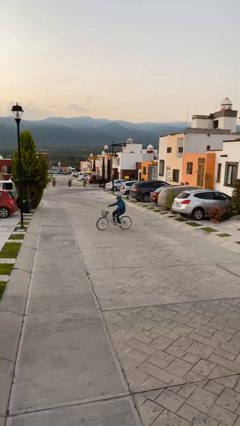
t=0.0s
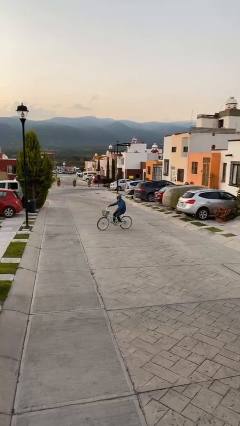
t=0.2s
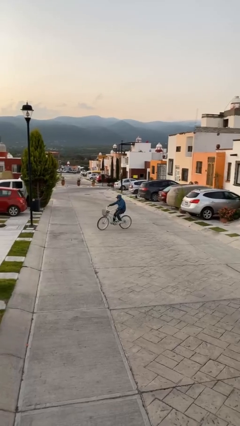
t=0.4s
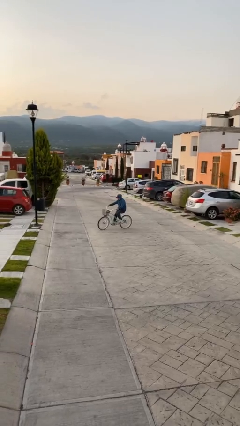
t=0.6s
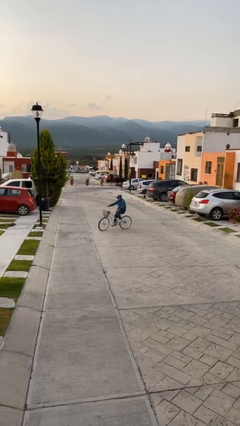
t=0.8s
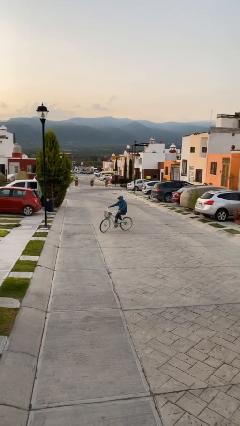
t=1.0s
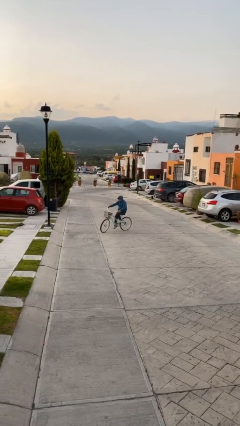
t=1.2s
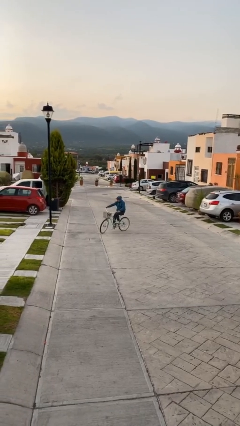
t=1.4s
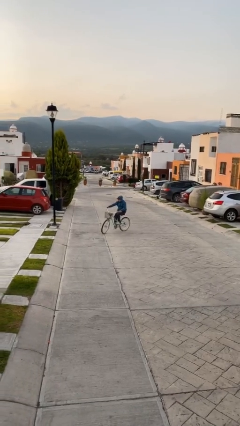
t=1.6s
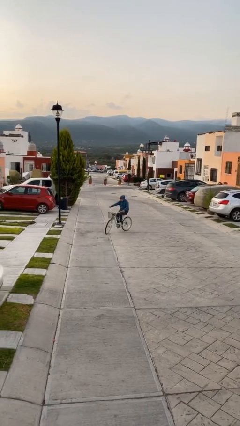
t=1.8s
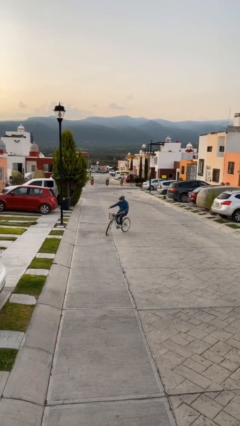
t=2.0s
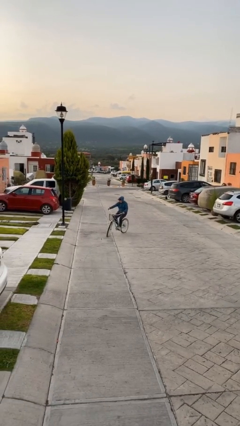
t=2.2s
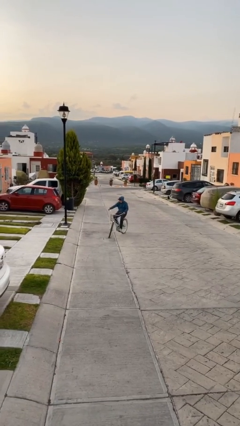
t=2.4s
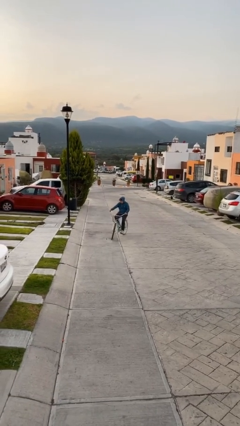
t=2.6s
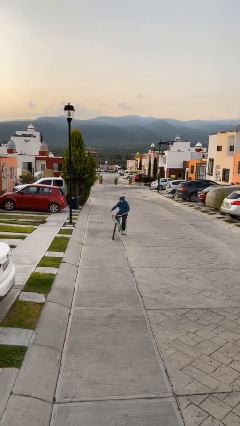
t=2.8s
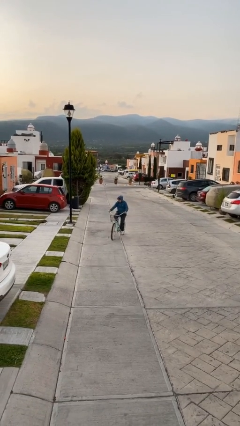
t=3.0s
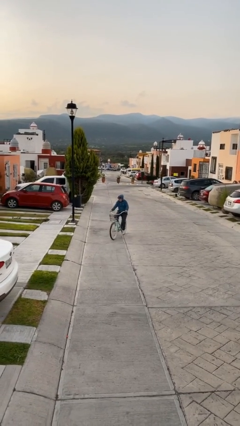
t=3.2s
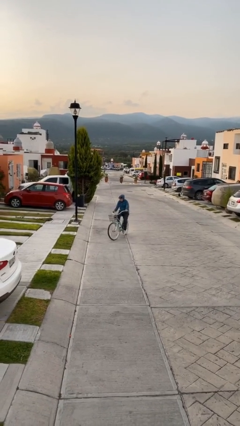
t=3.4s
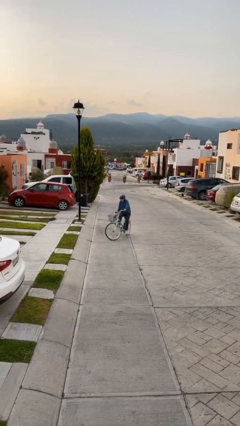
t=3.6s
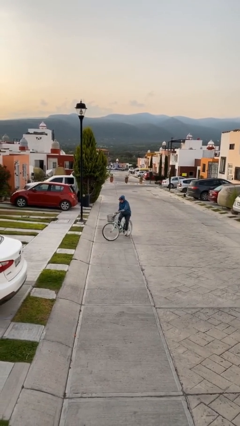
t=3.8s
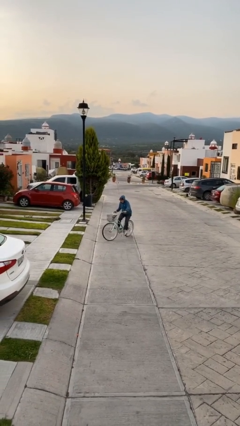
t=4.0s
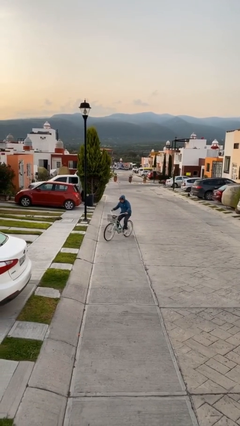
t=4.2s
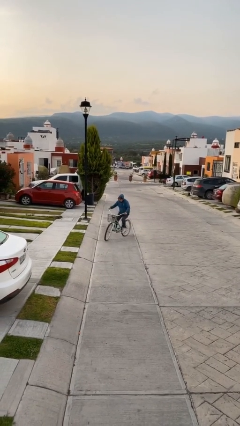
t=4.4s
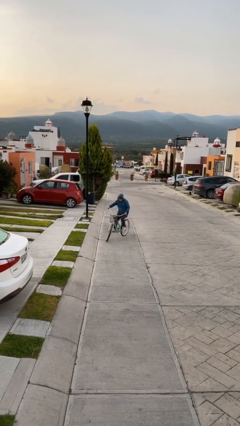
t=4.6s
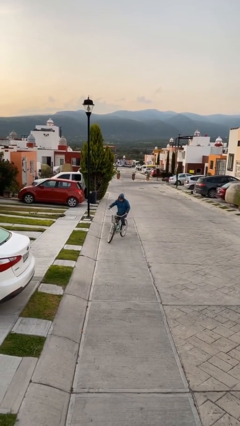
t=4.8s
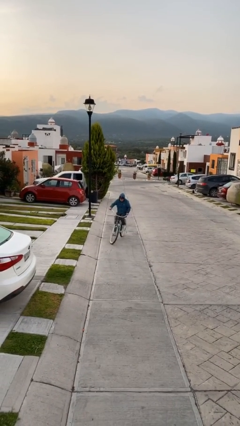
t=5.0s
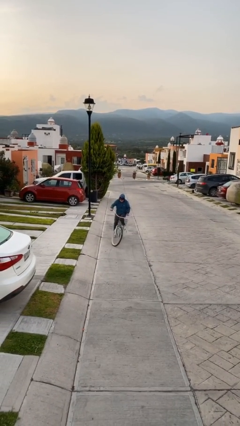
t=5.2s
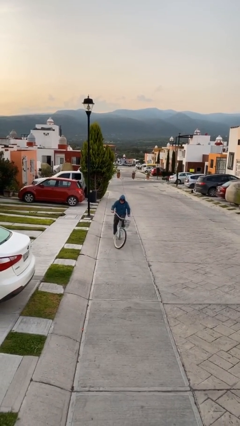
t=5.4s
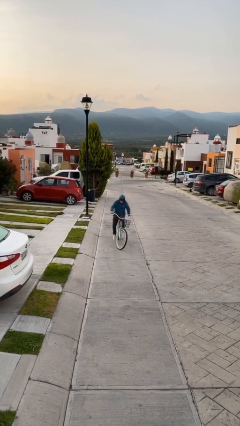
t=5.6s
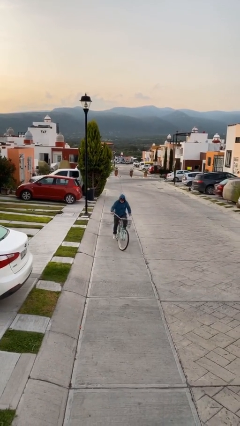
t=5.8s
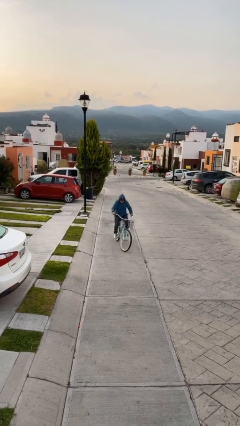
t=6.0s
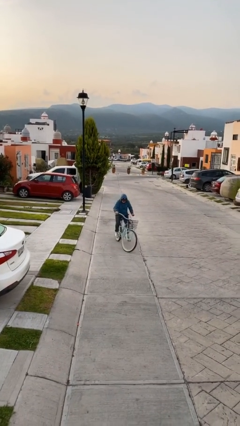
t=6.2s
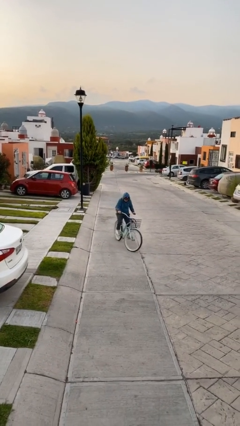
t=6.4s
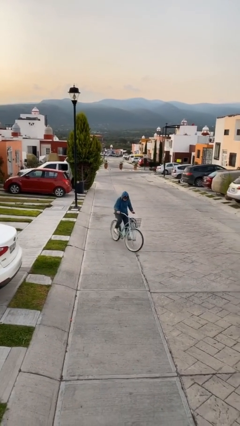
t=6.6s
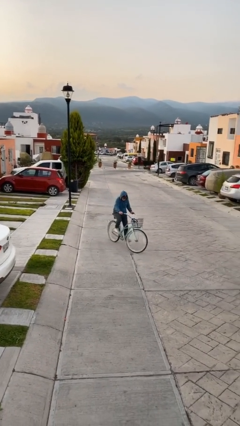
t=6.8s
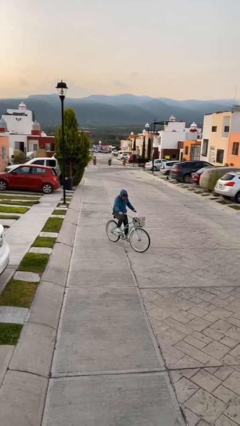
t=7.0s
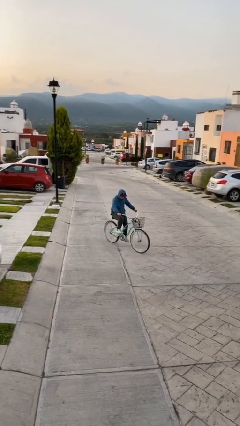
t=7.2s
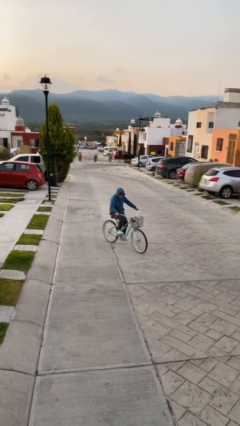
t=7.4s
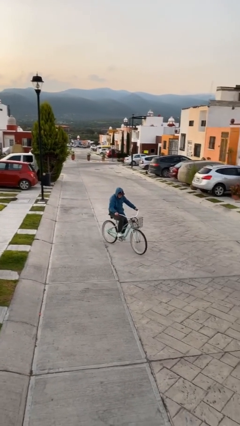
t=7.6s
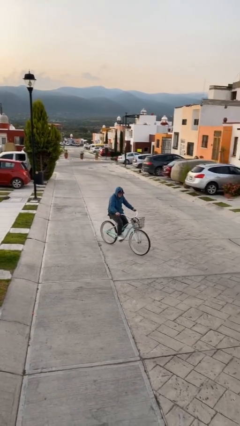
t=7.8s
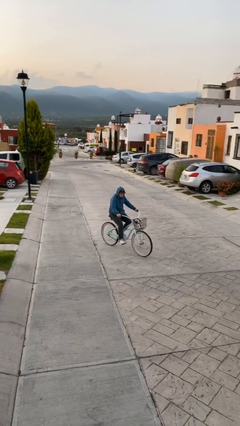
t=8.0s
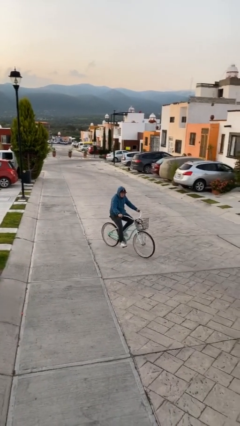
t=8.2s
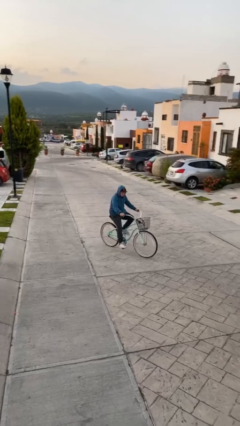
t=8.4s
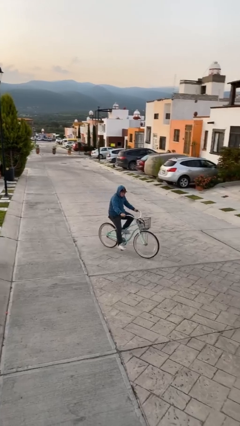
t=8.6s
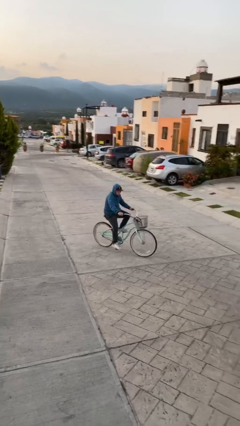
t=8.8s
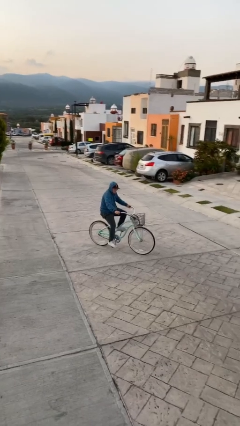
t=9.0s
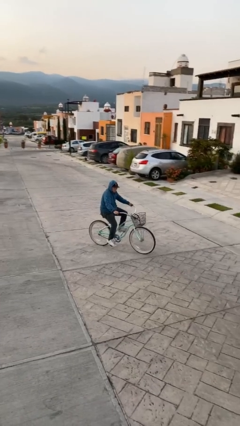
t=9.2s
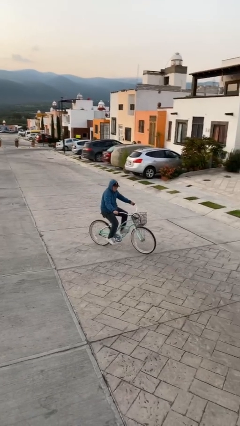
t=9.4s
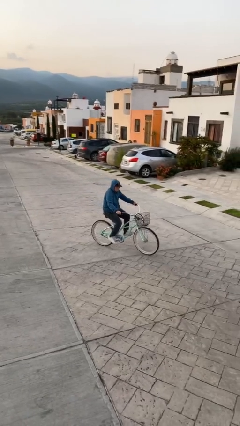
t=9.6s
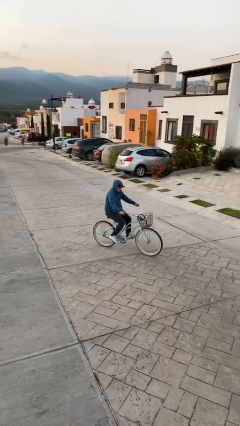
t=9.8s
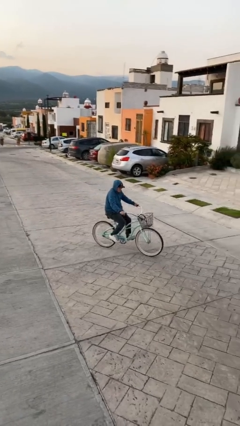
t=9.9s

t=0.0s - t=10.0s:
person rides bicycle

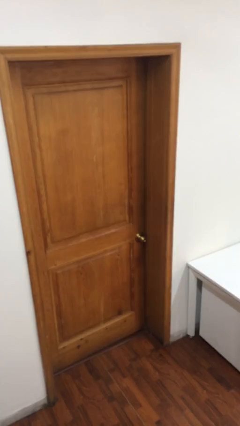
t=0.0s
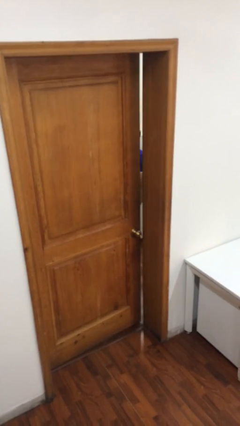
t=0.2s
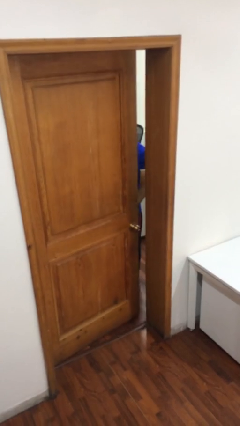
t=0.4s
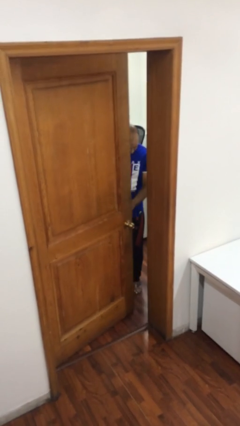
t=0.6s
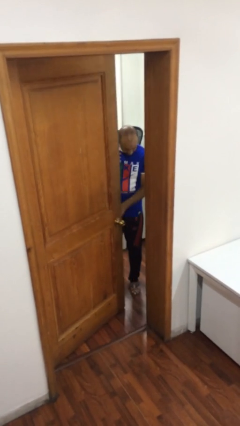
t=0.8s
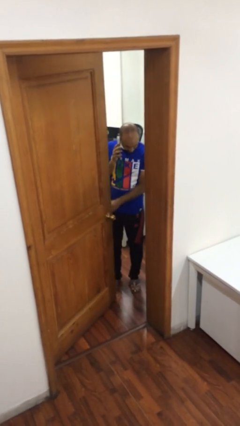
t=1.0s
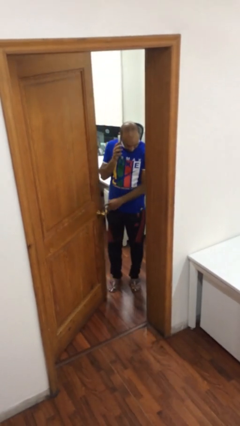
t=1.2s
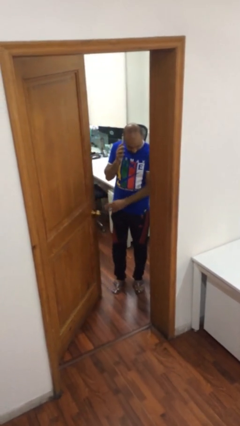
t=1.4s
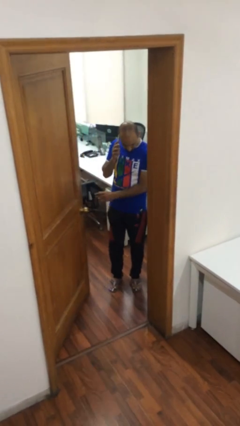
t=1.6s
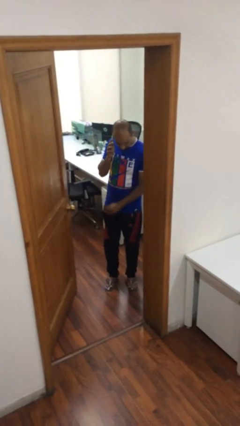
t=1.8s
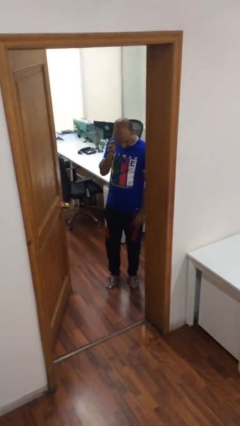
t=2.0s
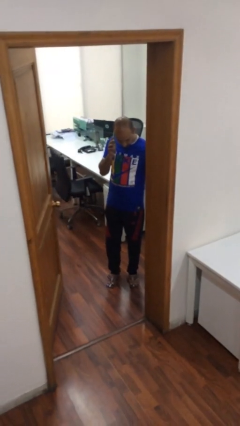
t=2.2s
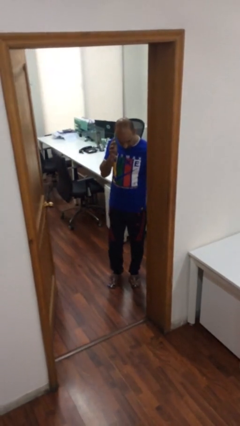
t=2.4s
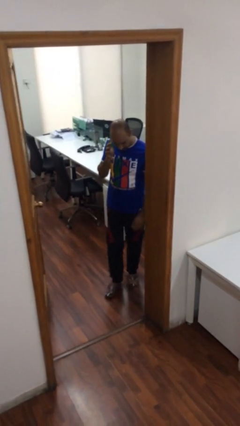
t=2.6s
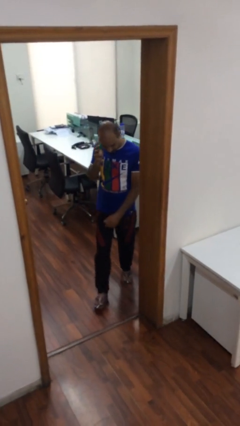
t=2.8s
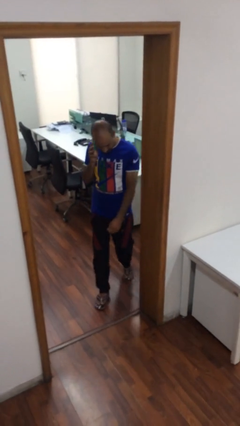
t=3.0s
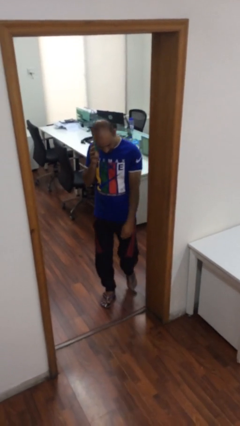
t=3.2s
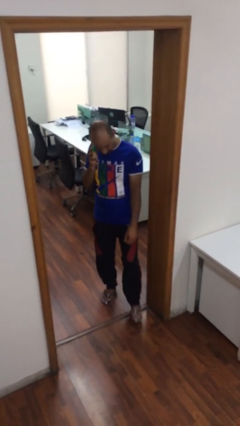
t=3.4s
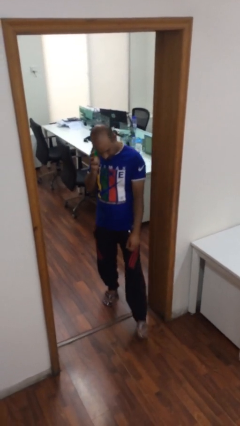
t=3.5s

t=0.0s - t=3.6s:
person opens facility door

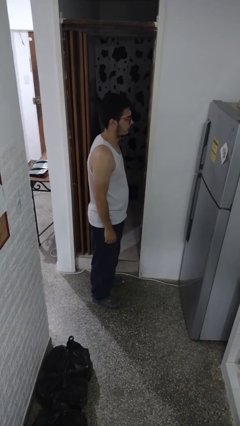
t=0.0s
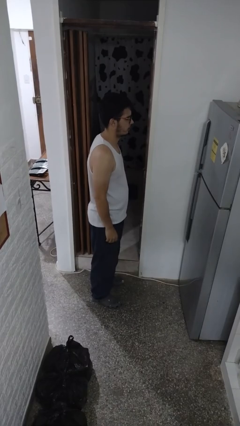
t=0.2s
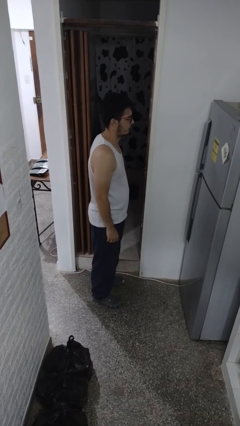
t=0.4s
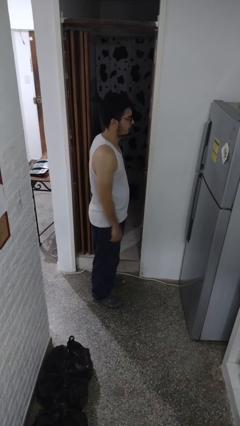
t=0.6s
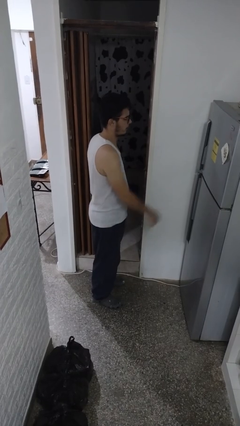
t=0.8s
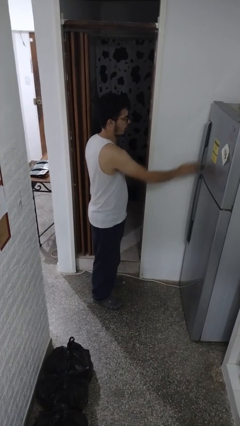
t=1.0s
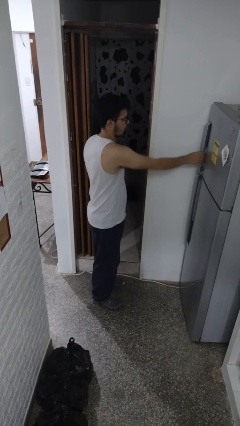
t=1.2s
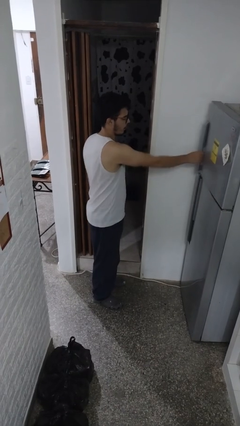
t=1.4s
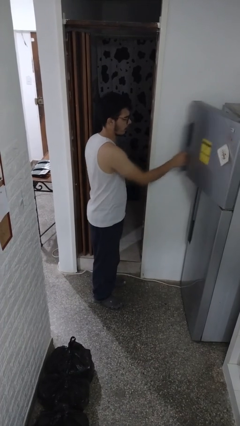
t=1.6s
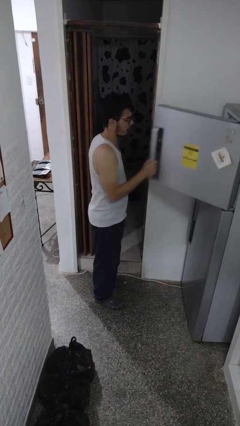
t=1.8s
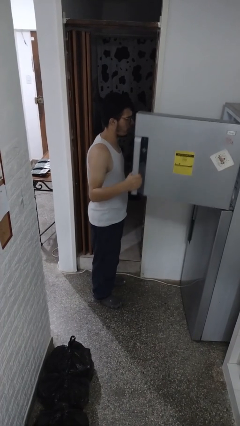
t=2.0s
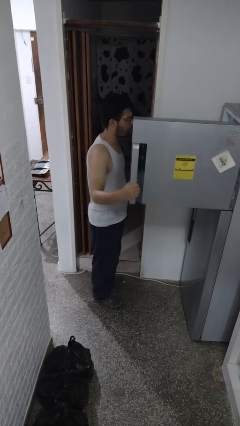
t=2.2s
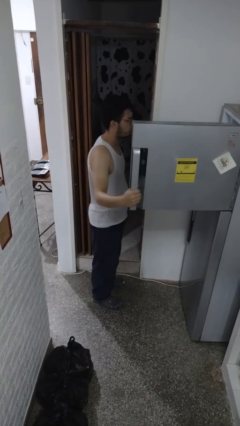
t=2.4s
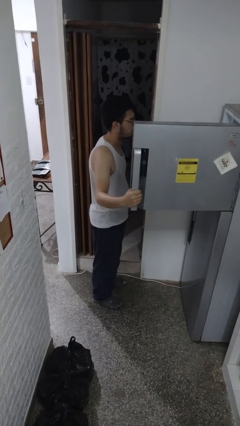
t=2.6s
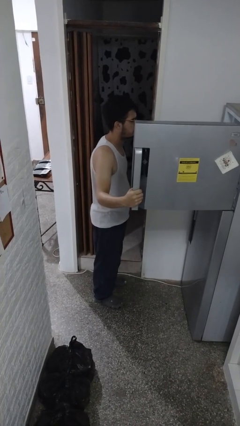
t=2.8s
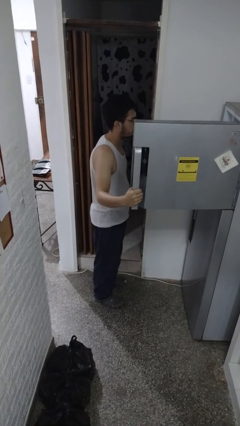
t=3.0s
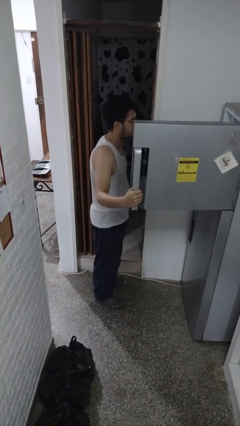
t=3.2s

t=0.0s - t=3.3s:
person opens refrigerator

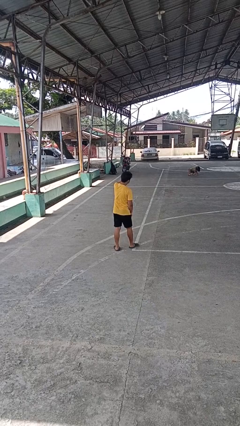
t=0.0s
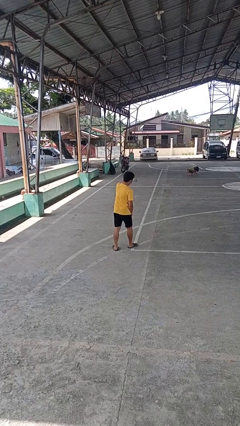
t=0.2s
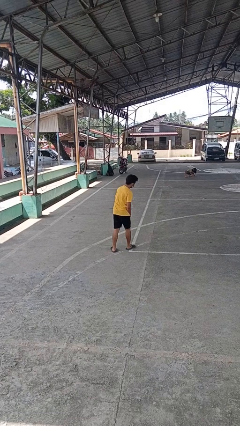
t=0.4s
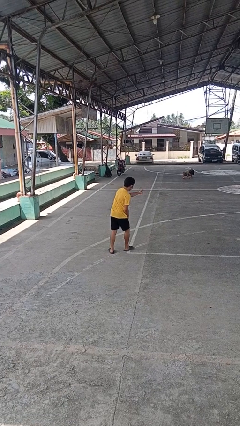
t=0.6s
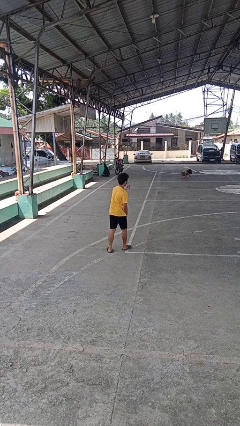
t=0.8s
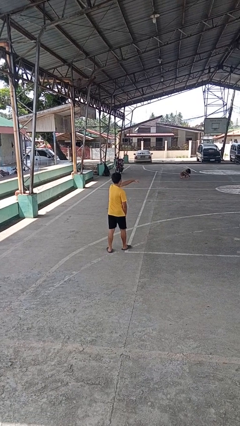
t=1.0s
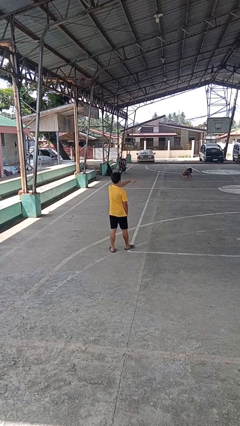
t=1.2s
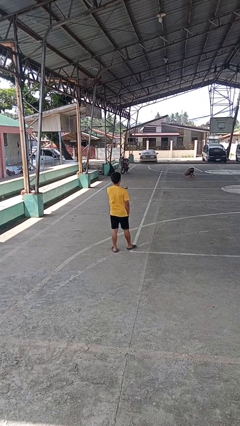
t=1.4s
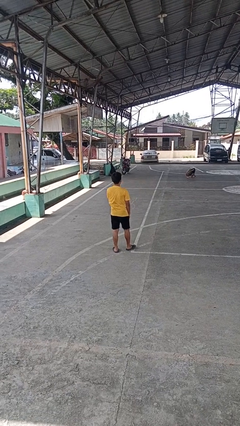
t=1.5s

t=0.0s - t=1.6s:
person punches
